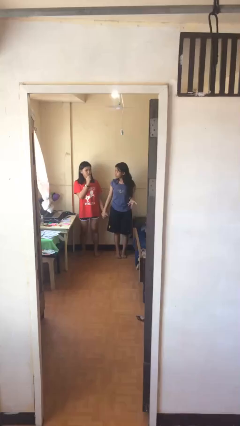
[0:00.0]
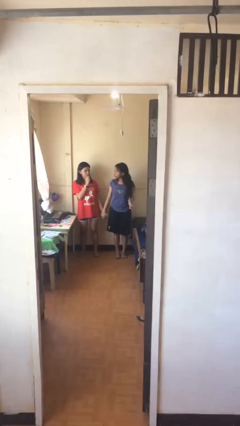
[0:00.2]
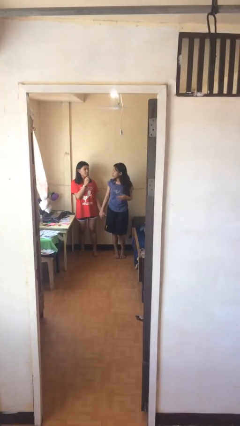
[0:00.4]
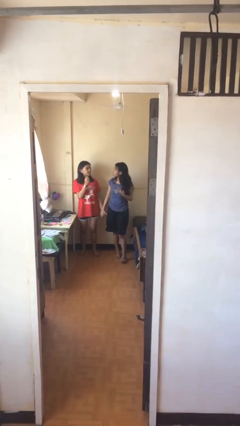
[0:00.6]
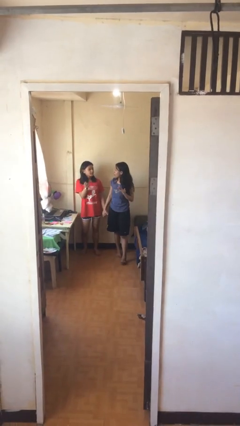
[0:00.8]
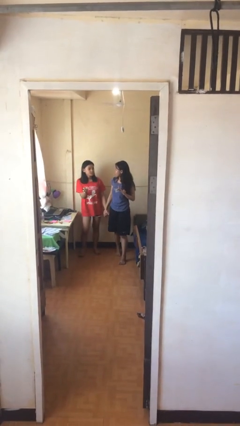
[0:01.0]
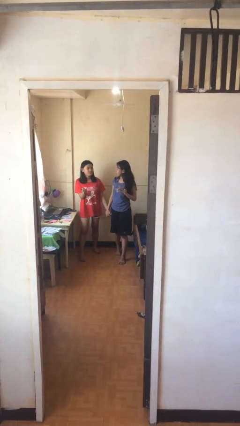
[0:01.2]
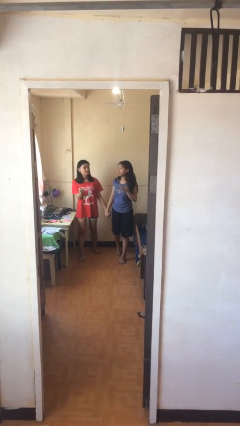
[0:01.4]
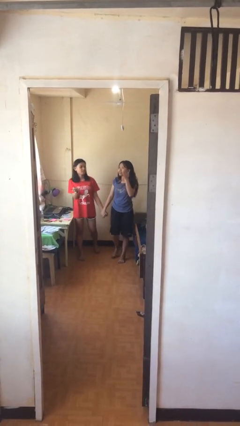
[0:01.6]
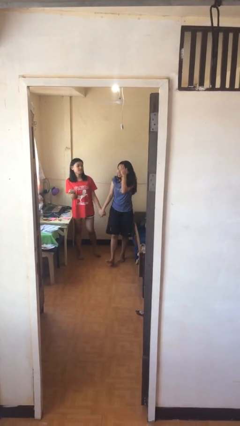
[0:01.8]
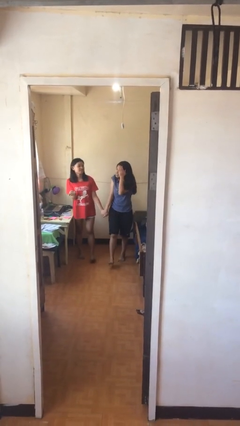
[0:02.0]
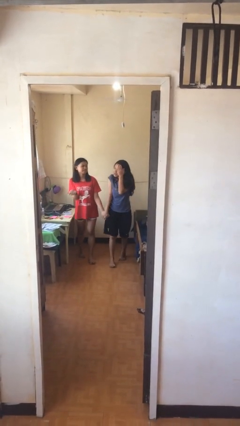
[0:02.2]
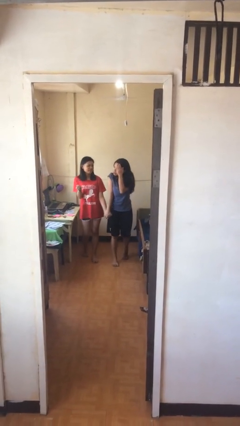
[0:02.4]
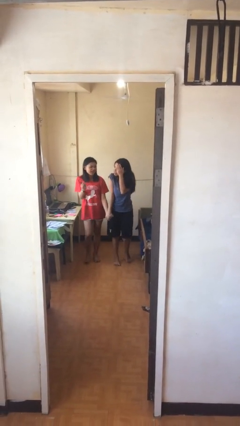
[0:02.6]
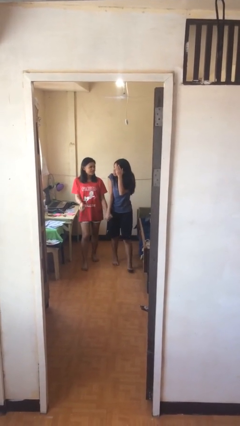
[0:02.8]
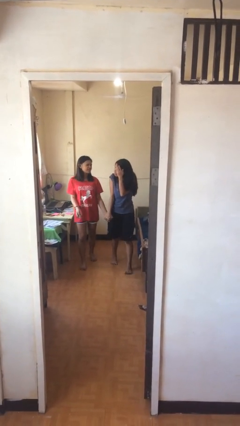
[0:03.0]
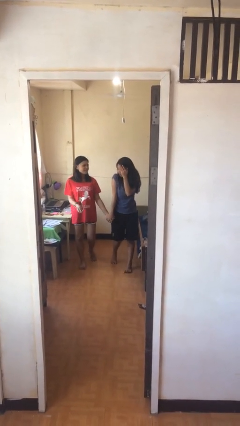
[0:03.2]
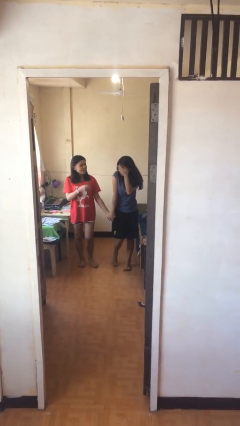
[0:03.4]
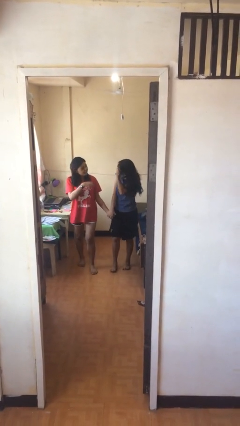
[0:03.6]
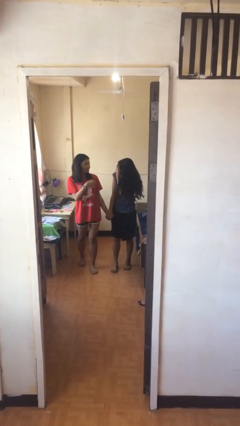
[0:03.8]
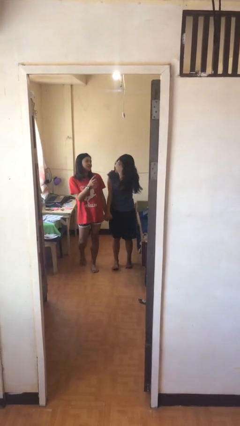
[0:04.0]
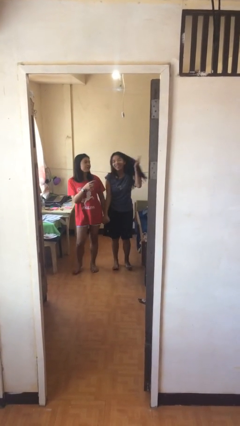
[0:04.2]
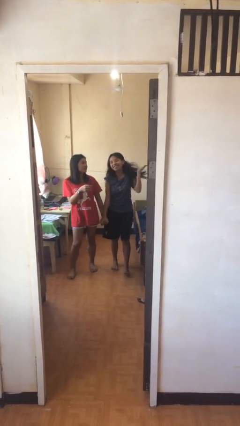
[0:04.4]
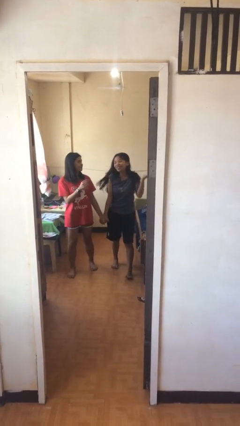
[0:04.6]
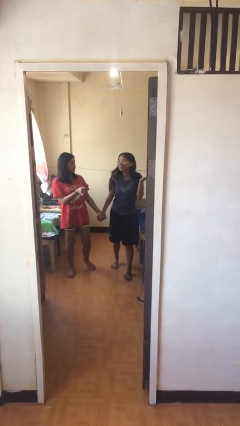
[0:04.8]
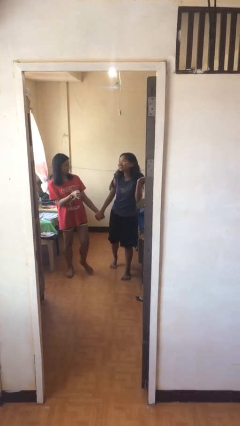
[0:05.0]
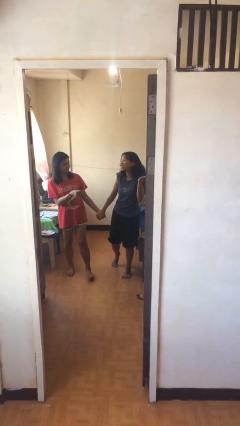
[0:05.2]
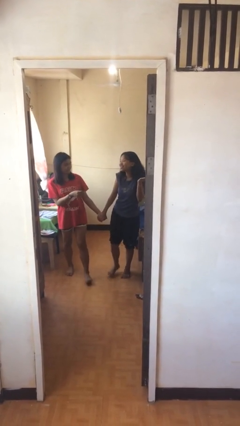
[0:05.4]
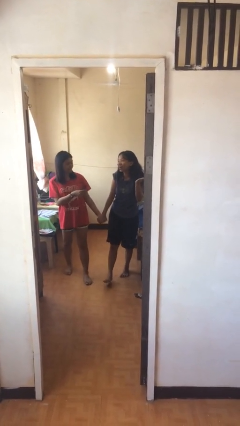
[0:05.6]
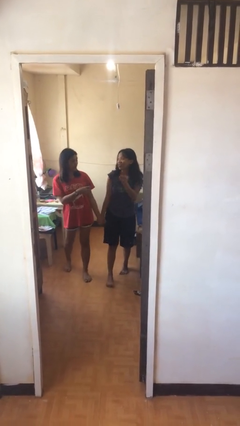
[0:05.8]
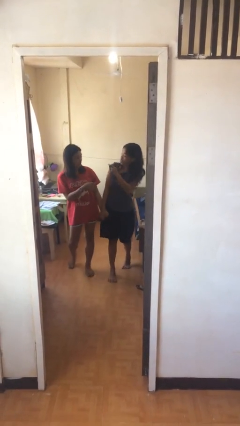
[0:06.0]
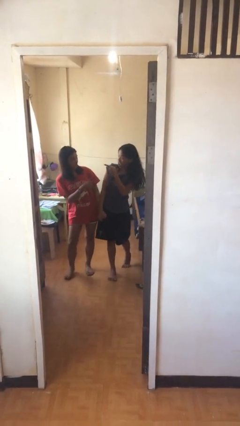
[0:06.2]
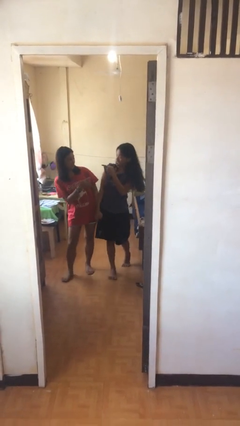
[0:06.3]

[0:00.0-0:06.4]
person holds hand

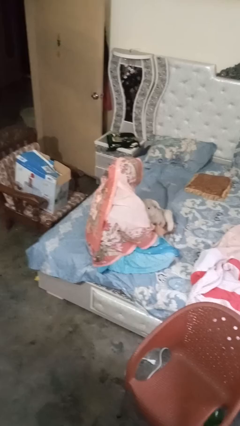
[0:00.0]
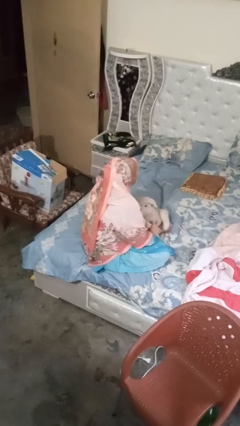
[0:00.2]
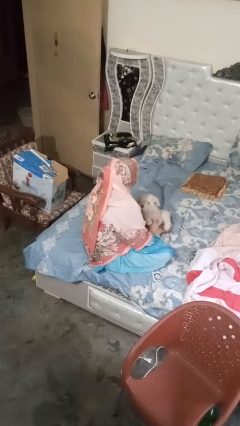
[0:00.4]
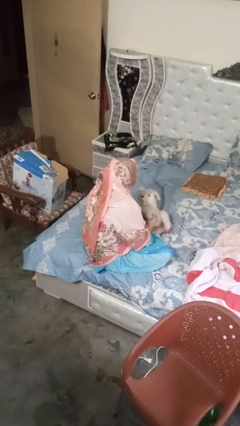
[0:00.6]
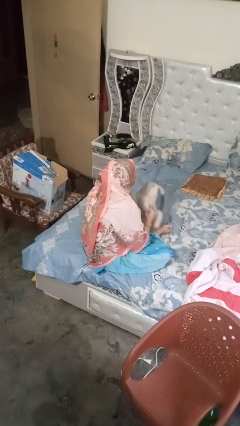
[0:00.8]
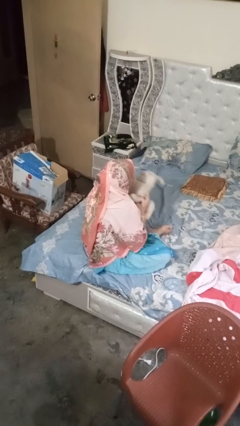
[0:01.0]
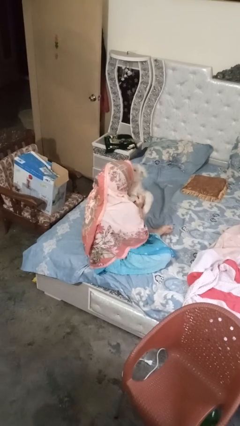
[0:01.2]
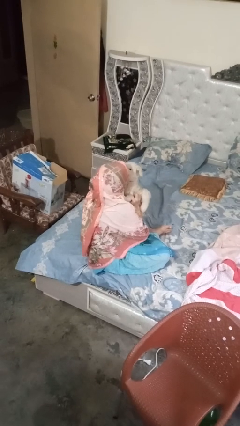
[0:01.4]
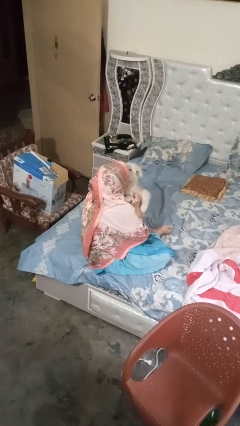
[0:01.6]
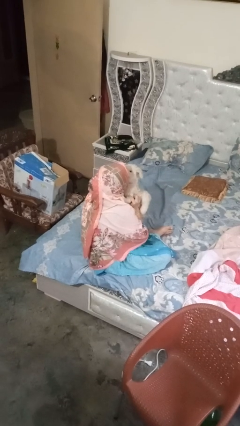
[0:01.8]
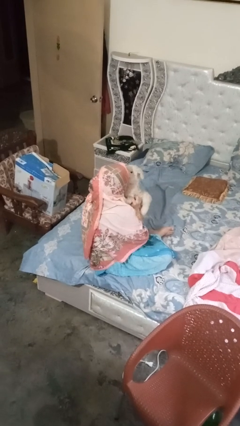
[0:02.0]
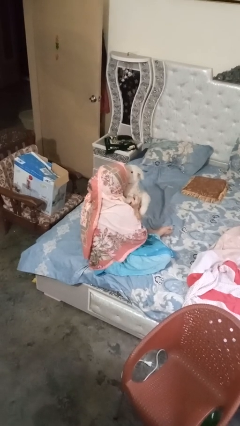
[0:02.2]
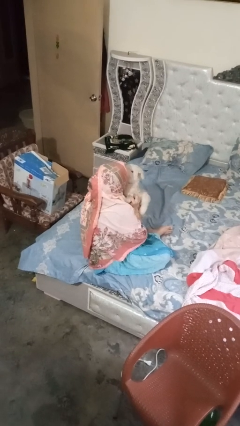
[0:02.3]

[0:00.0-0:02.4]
person hugs stuffed animal

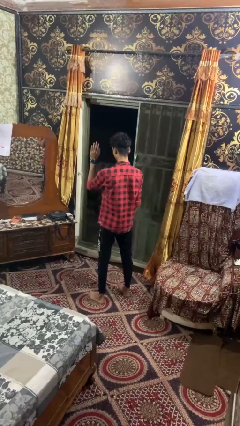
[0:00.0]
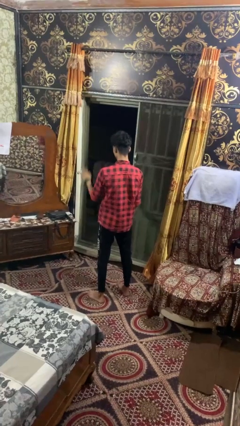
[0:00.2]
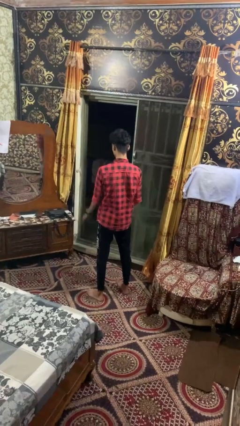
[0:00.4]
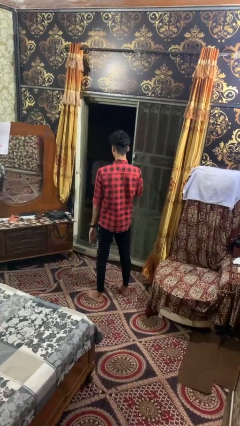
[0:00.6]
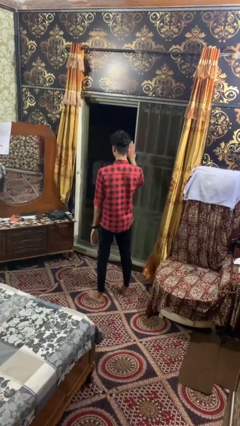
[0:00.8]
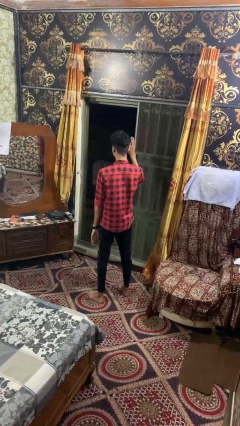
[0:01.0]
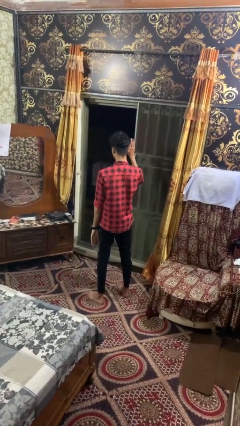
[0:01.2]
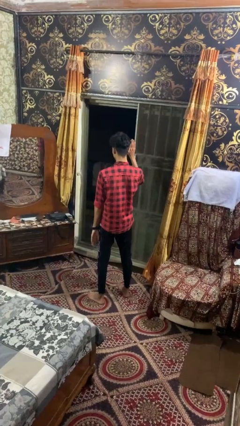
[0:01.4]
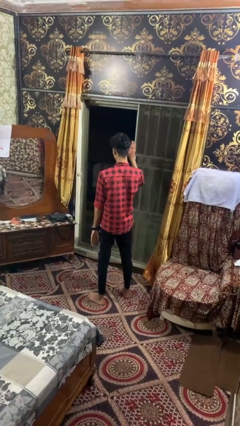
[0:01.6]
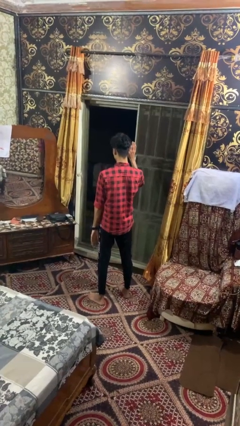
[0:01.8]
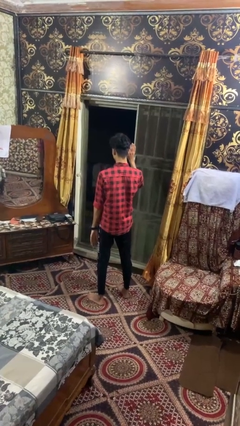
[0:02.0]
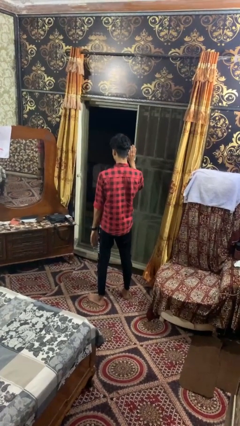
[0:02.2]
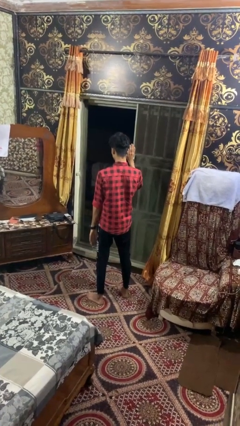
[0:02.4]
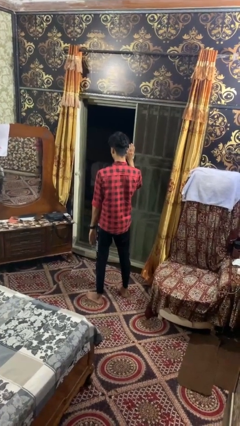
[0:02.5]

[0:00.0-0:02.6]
person gestures swipe right

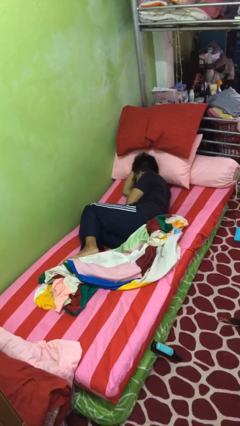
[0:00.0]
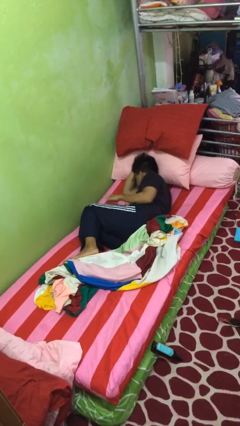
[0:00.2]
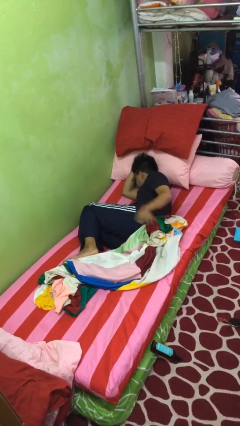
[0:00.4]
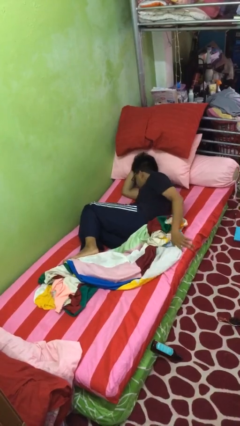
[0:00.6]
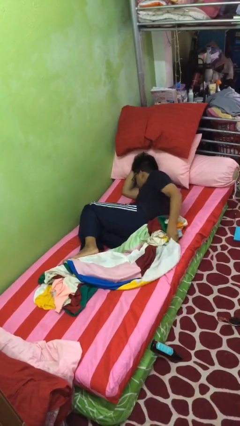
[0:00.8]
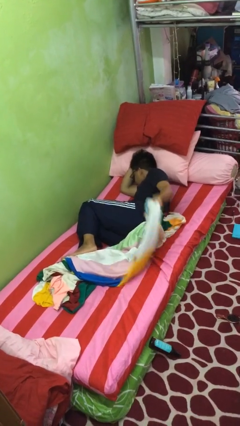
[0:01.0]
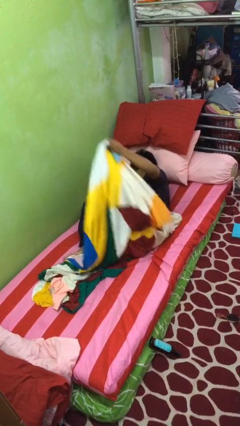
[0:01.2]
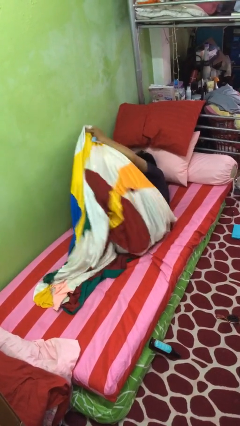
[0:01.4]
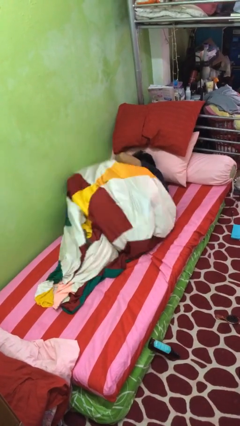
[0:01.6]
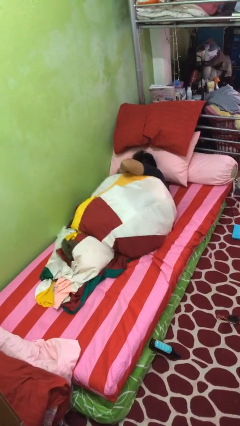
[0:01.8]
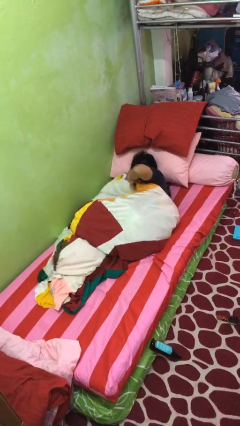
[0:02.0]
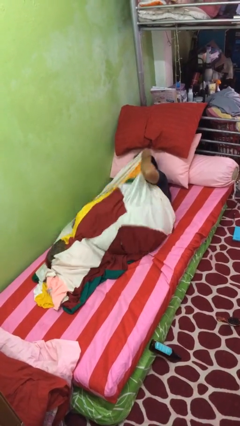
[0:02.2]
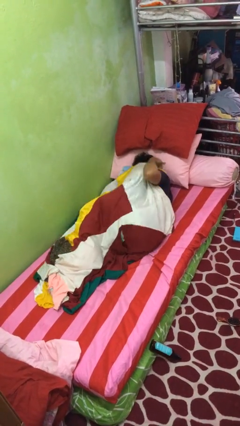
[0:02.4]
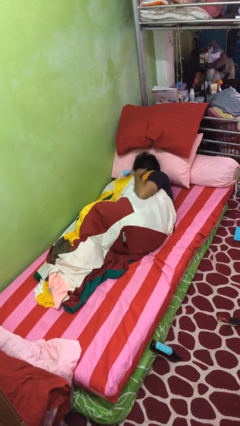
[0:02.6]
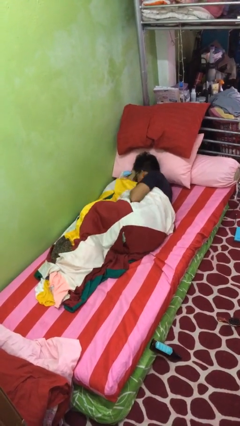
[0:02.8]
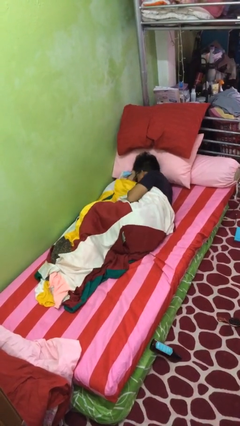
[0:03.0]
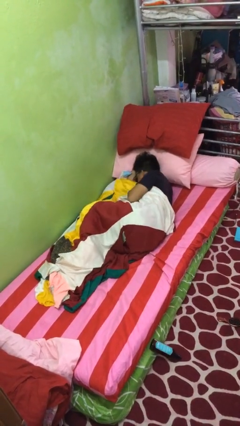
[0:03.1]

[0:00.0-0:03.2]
person covers with blanket

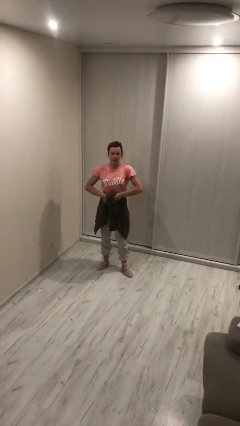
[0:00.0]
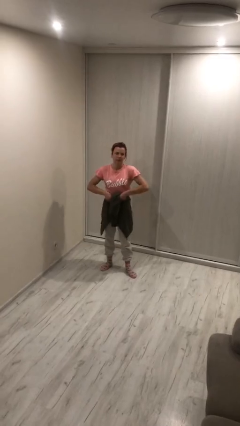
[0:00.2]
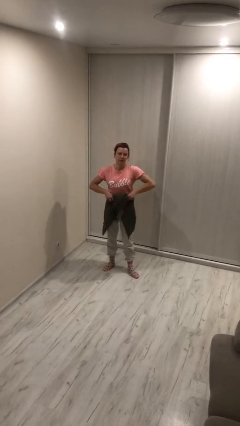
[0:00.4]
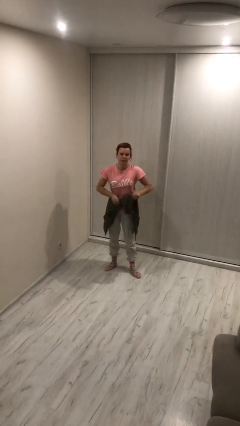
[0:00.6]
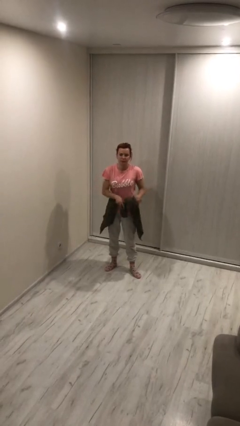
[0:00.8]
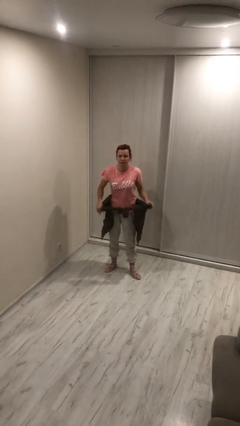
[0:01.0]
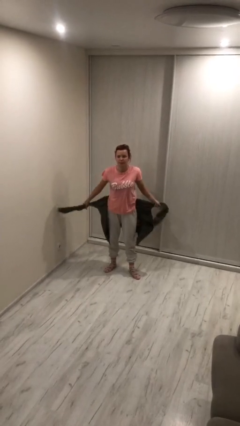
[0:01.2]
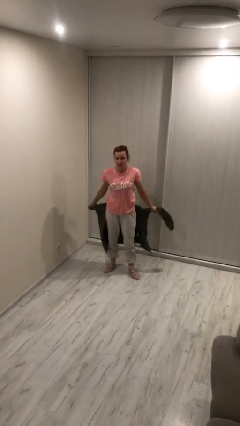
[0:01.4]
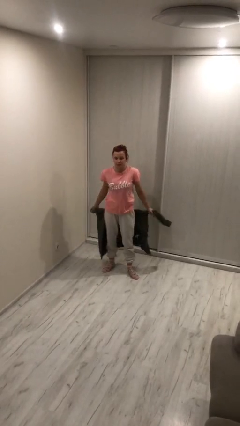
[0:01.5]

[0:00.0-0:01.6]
person unties jacket around waist

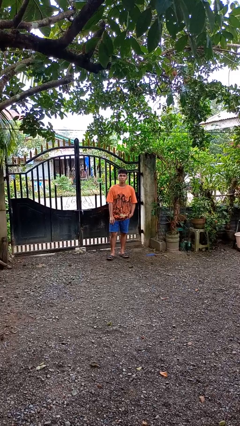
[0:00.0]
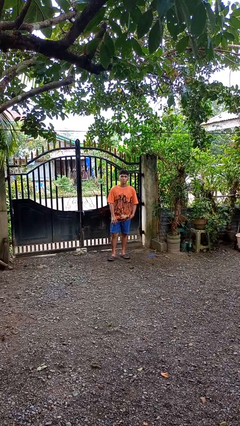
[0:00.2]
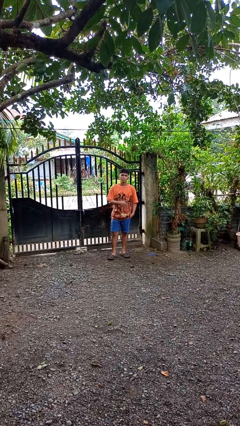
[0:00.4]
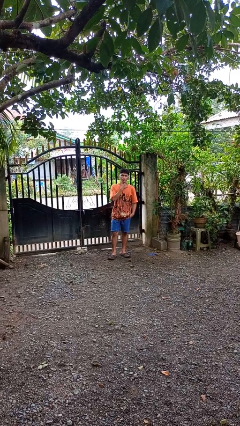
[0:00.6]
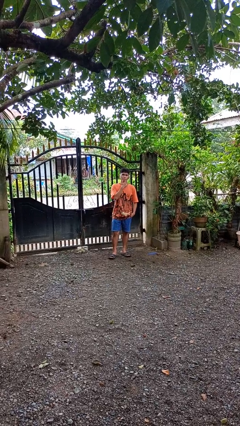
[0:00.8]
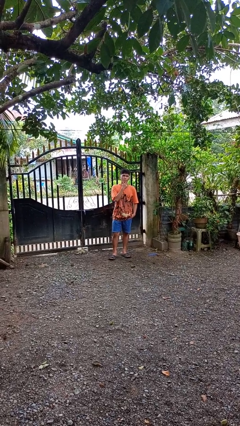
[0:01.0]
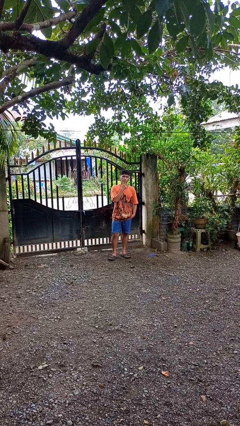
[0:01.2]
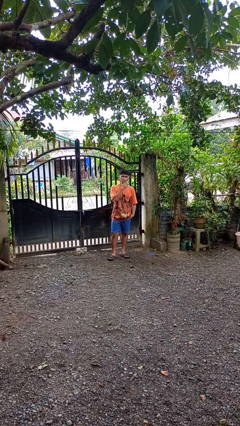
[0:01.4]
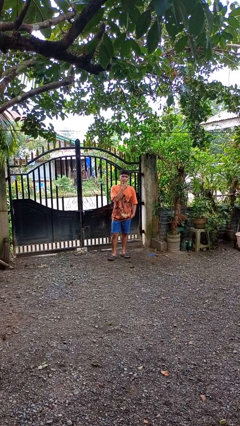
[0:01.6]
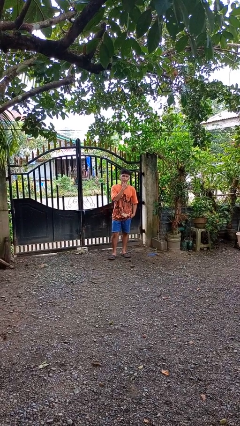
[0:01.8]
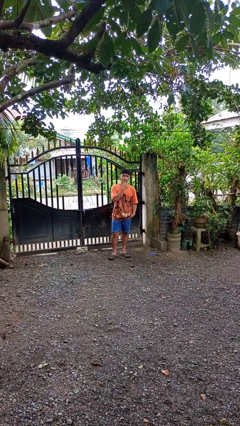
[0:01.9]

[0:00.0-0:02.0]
person strokes chin
